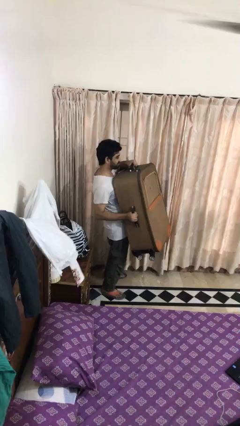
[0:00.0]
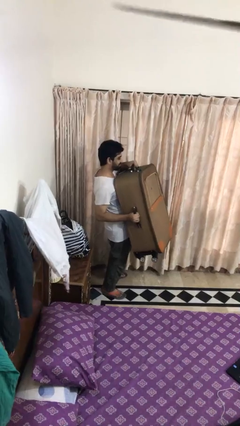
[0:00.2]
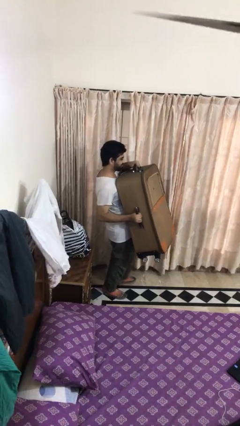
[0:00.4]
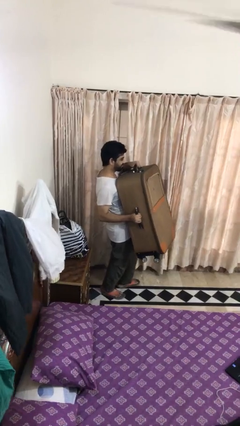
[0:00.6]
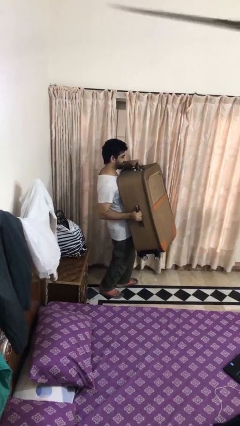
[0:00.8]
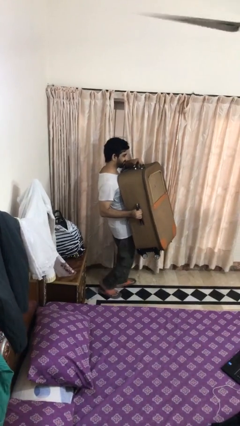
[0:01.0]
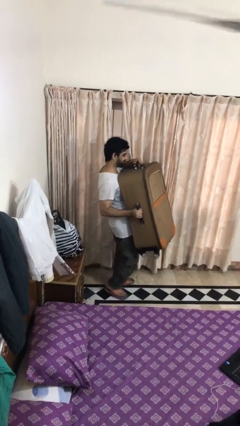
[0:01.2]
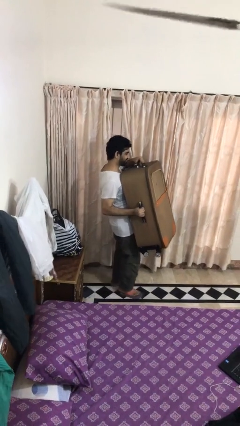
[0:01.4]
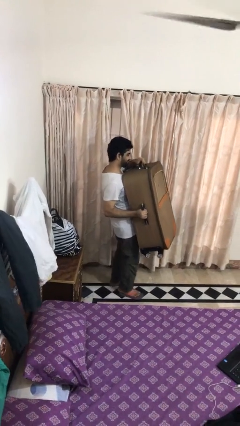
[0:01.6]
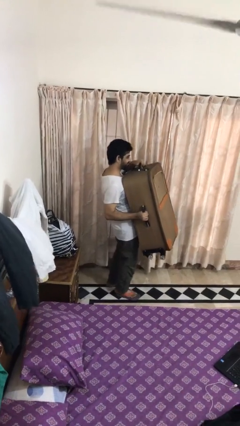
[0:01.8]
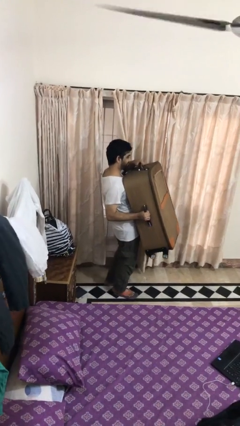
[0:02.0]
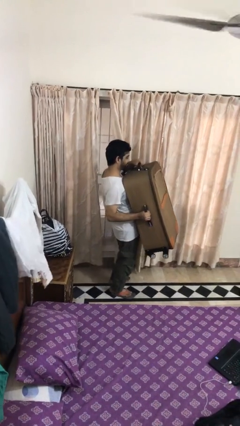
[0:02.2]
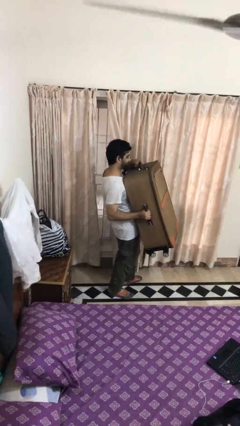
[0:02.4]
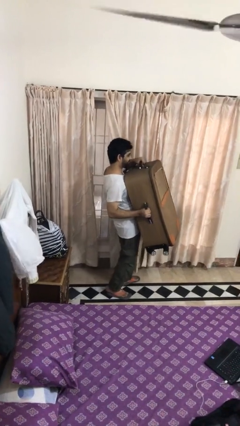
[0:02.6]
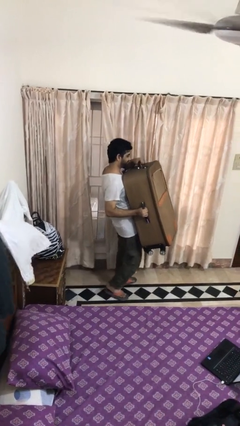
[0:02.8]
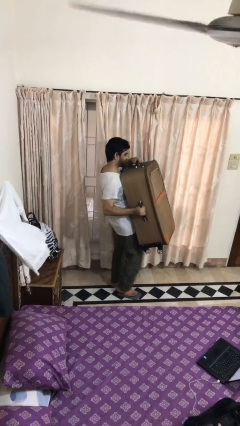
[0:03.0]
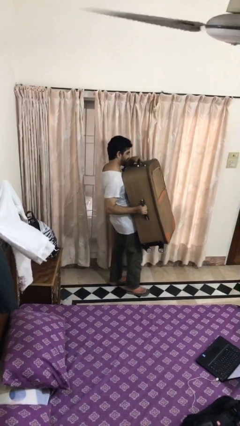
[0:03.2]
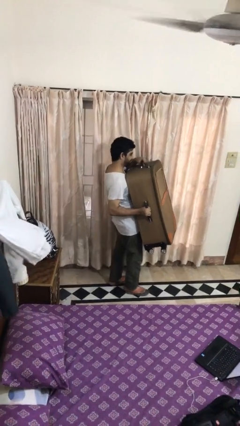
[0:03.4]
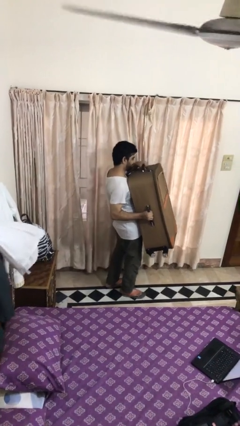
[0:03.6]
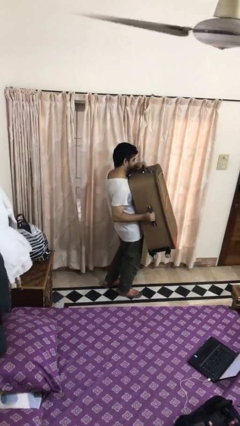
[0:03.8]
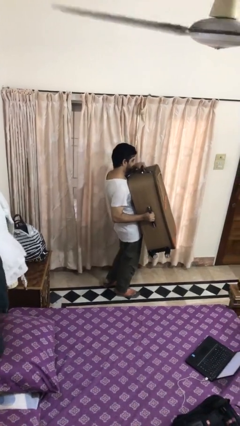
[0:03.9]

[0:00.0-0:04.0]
person carries heavy object

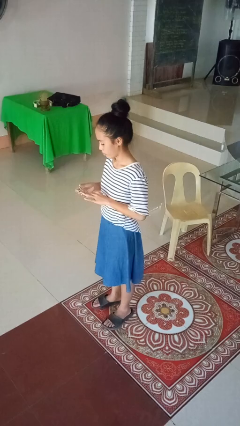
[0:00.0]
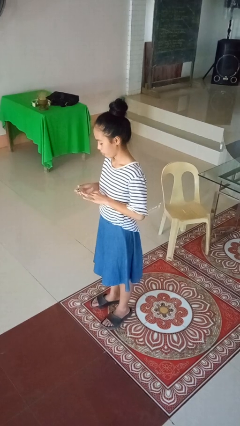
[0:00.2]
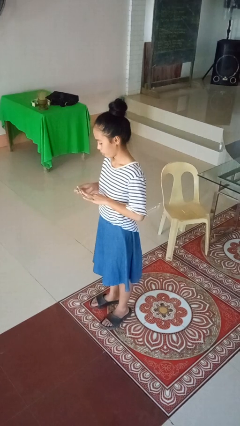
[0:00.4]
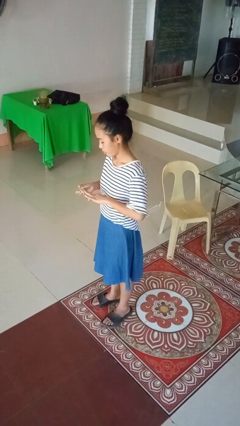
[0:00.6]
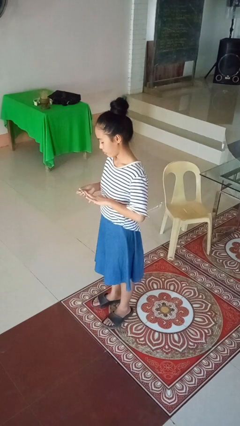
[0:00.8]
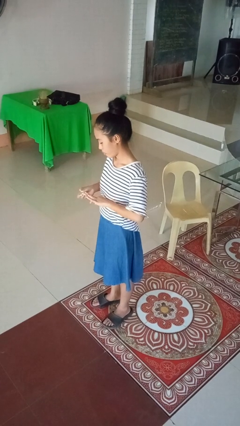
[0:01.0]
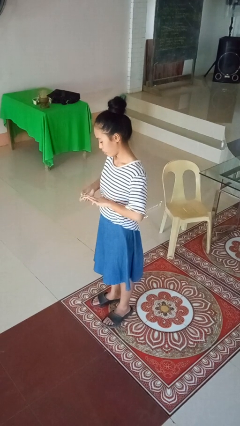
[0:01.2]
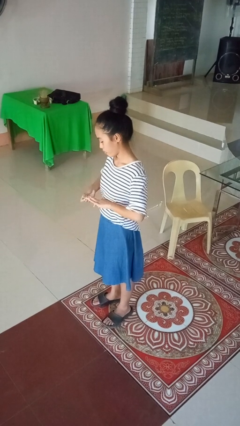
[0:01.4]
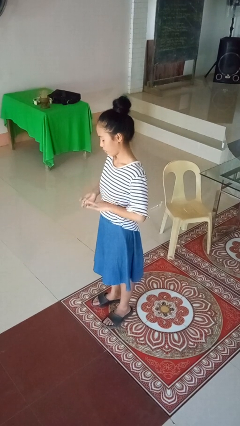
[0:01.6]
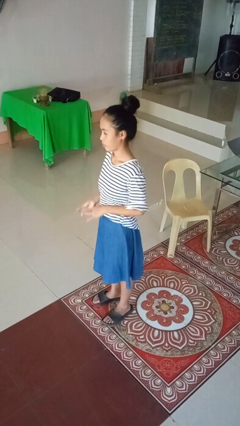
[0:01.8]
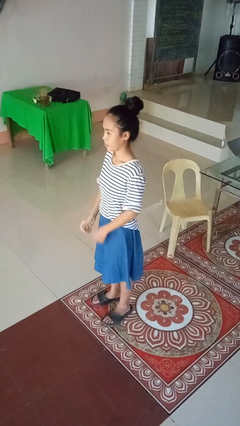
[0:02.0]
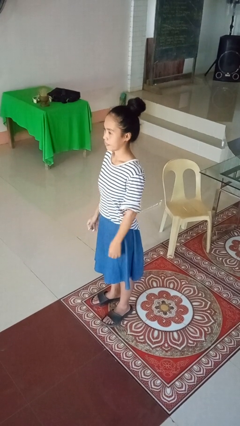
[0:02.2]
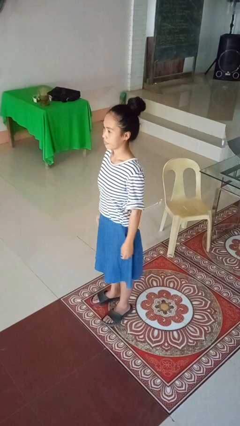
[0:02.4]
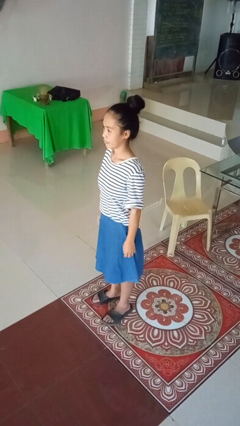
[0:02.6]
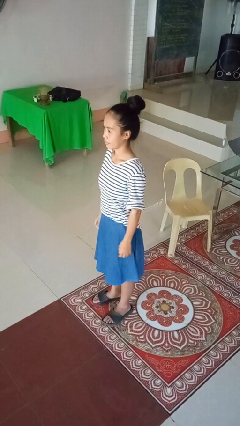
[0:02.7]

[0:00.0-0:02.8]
person clips fingernails

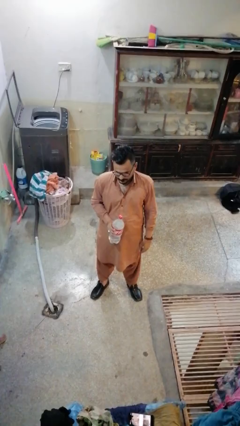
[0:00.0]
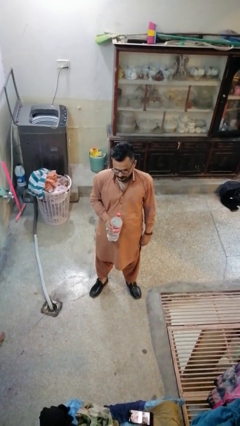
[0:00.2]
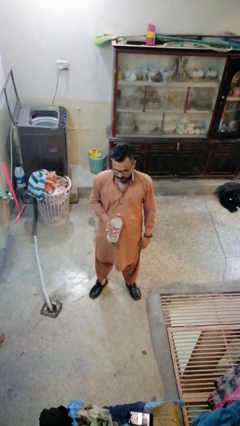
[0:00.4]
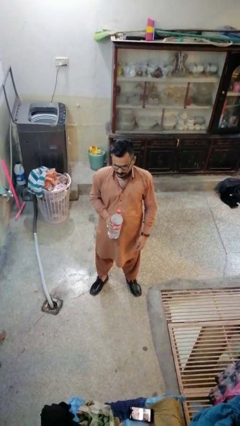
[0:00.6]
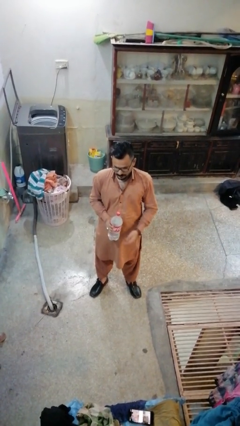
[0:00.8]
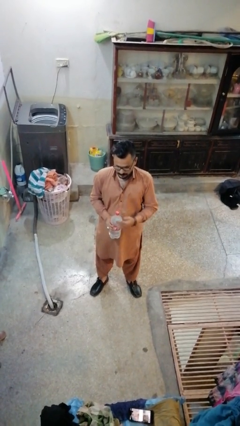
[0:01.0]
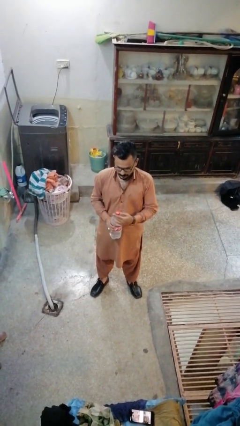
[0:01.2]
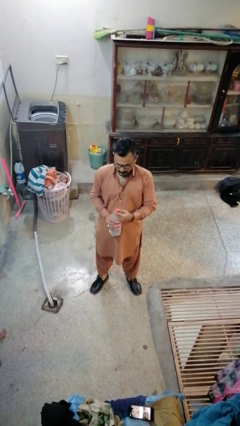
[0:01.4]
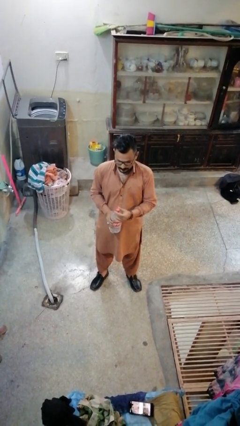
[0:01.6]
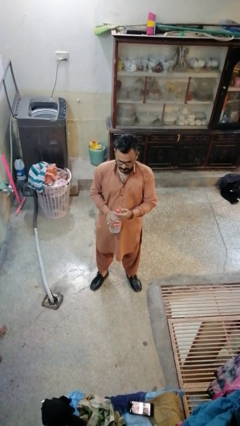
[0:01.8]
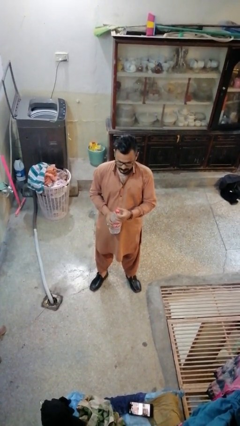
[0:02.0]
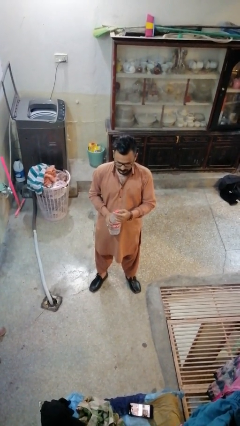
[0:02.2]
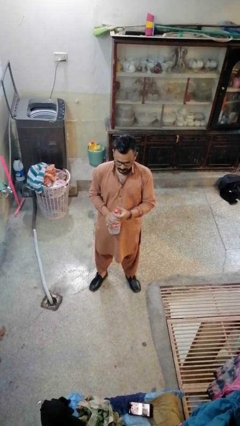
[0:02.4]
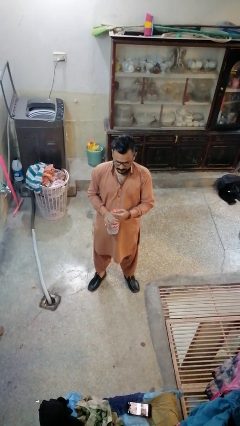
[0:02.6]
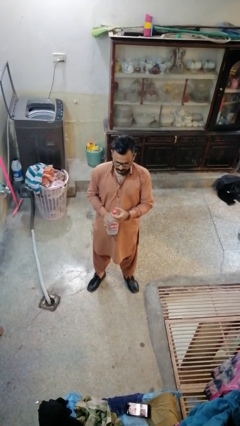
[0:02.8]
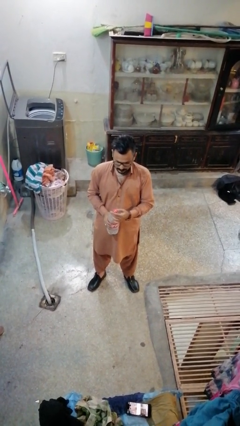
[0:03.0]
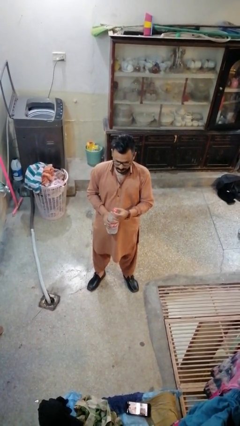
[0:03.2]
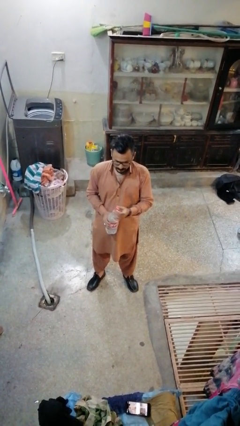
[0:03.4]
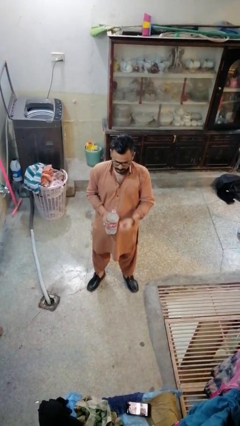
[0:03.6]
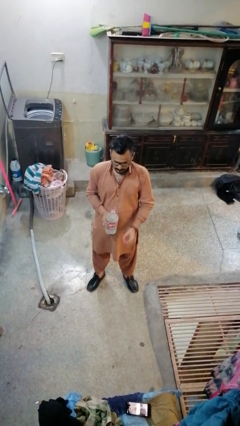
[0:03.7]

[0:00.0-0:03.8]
person unscrews lid from bottle

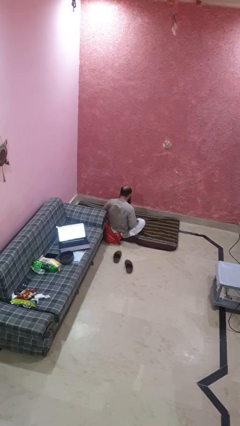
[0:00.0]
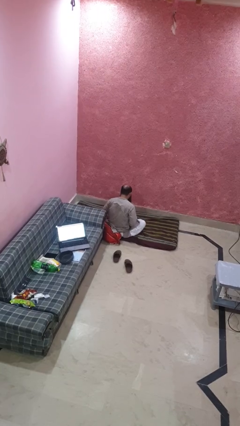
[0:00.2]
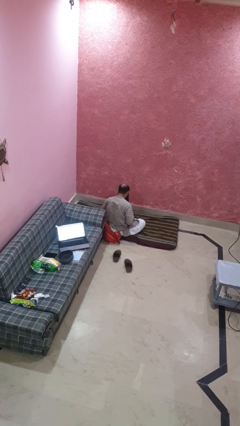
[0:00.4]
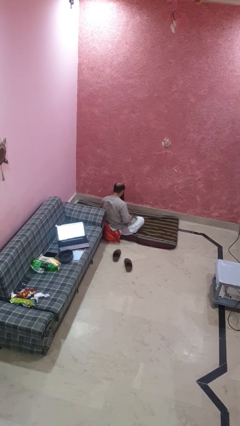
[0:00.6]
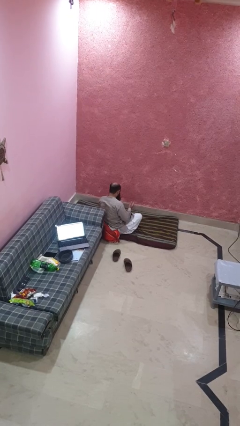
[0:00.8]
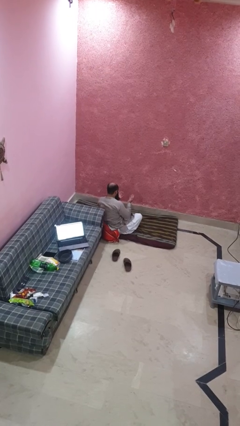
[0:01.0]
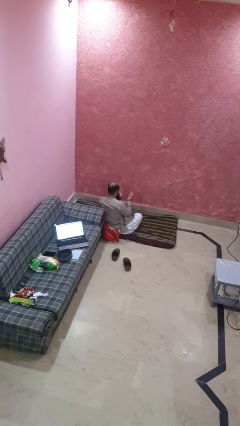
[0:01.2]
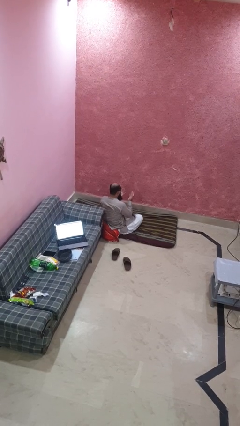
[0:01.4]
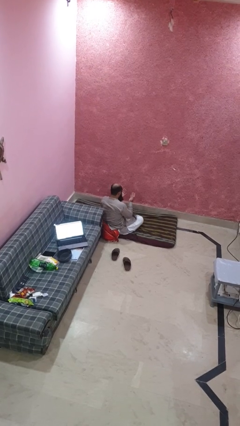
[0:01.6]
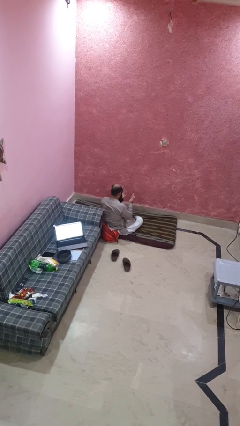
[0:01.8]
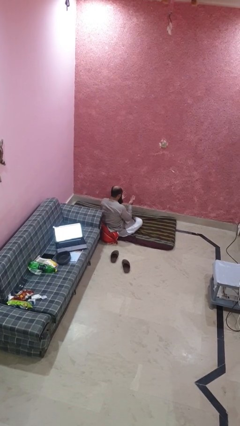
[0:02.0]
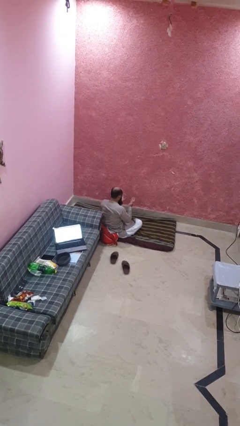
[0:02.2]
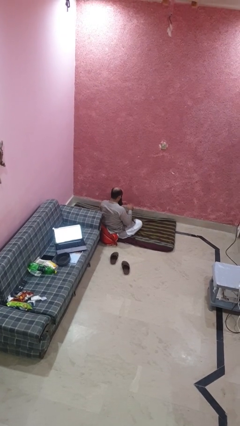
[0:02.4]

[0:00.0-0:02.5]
person looks at hands in lap

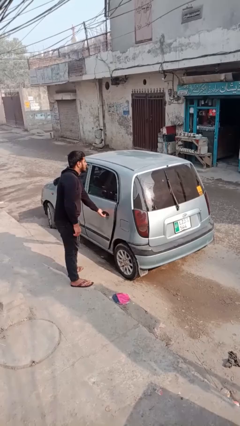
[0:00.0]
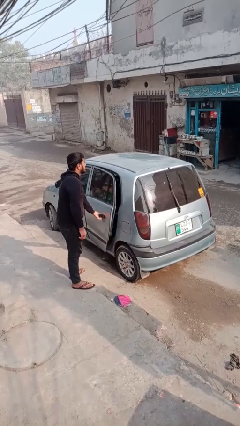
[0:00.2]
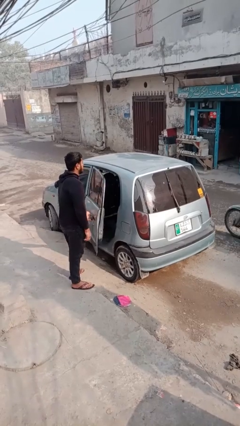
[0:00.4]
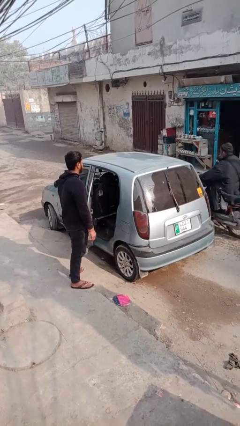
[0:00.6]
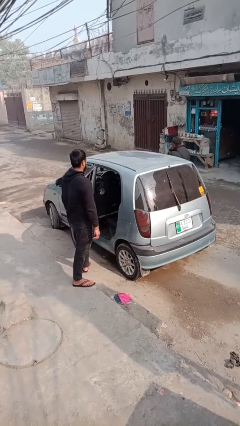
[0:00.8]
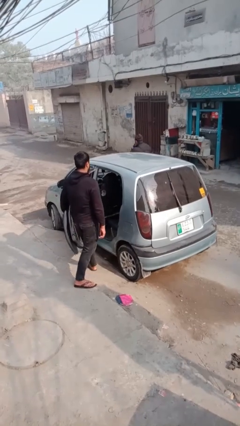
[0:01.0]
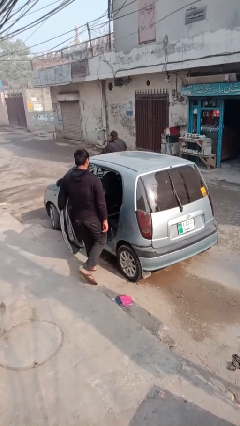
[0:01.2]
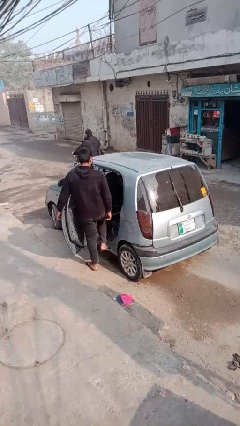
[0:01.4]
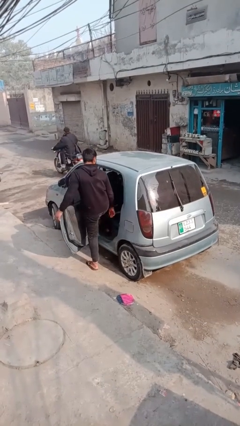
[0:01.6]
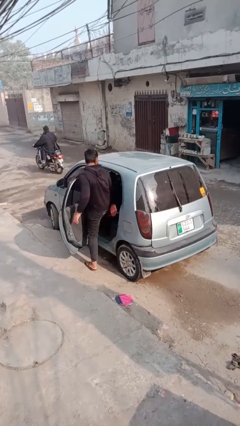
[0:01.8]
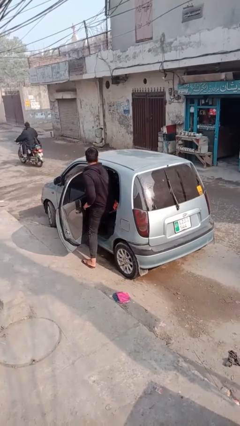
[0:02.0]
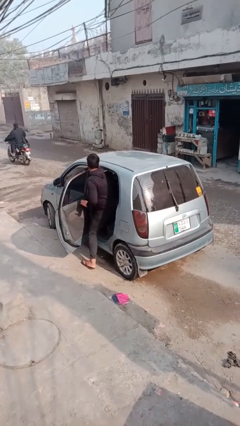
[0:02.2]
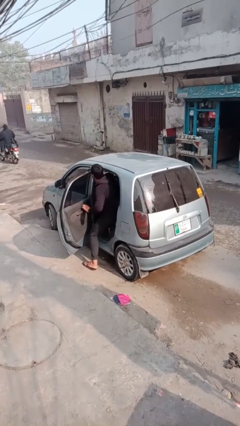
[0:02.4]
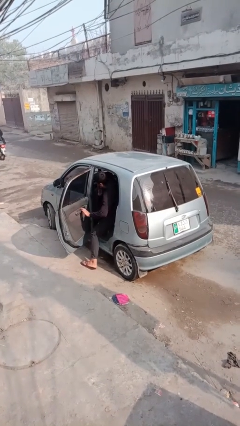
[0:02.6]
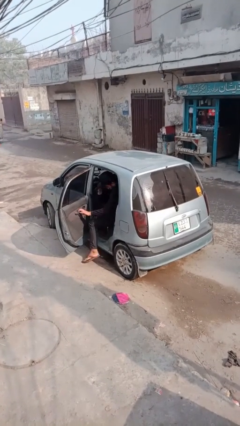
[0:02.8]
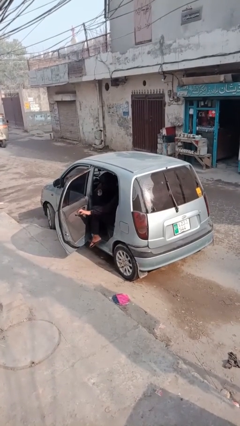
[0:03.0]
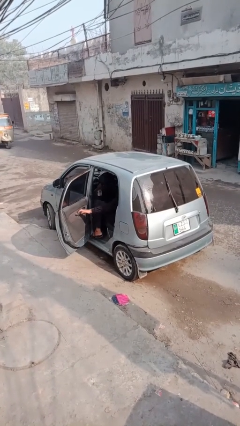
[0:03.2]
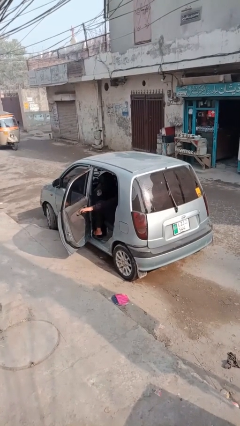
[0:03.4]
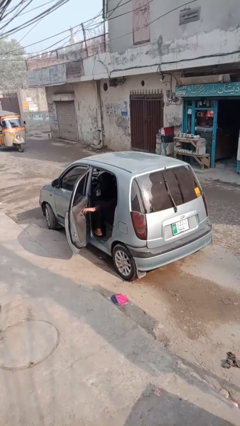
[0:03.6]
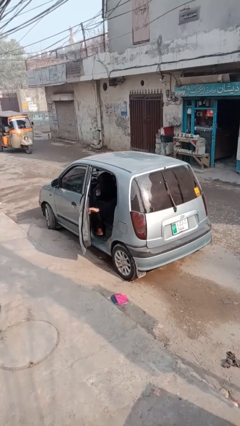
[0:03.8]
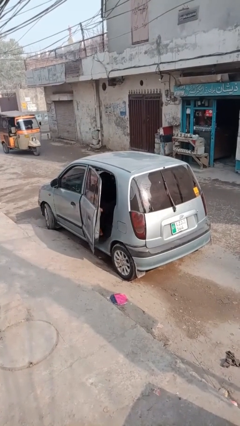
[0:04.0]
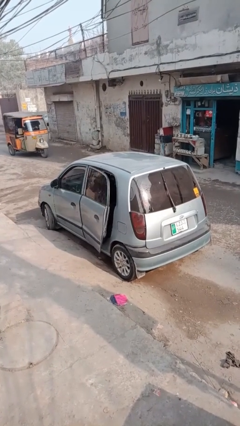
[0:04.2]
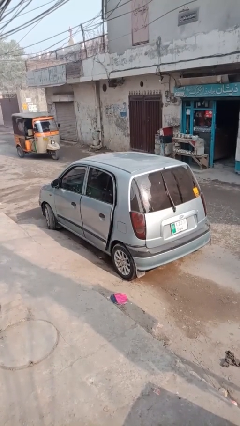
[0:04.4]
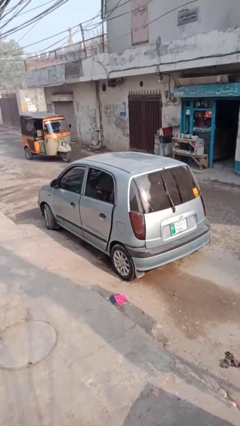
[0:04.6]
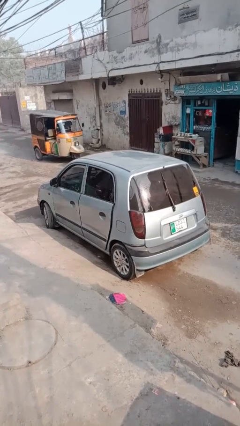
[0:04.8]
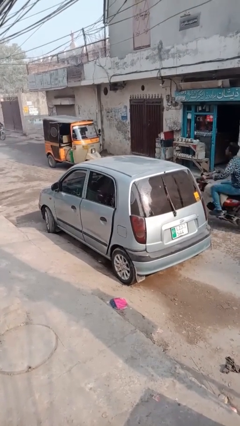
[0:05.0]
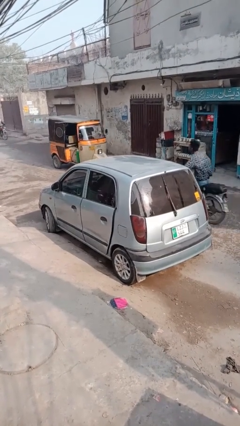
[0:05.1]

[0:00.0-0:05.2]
car picks up person
